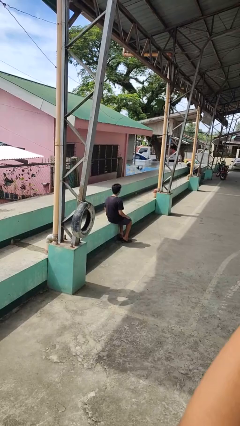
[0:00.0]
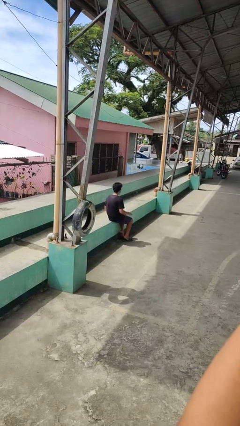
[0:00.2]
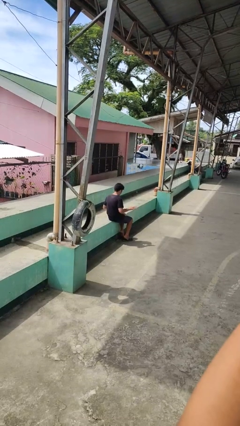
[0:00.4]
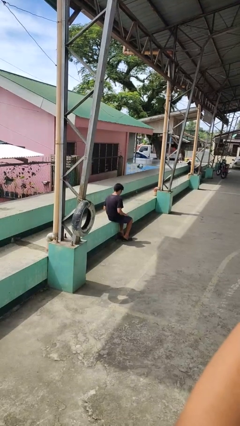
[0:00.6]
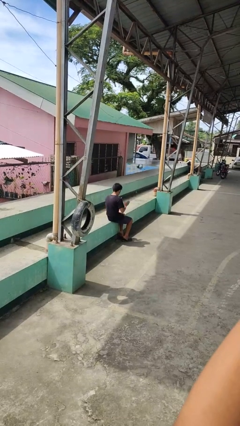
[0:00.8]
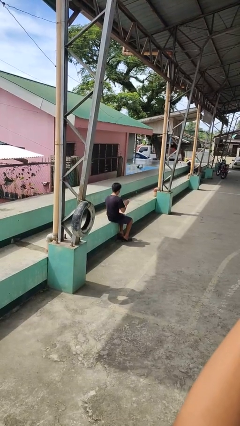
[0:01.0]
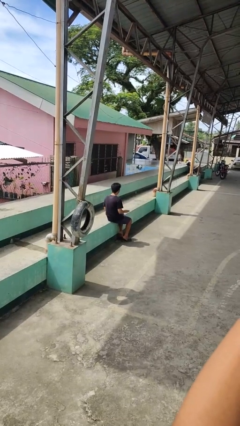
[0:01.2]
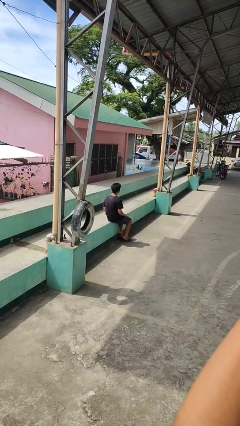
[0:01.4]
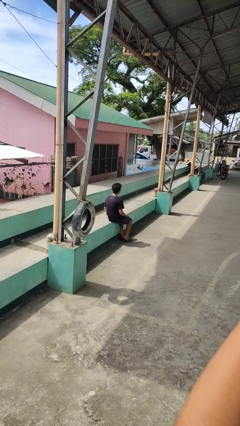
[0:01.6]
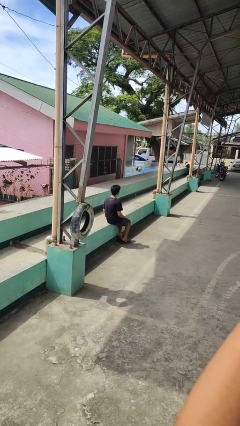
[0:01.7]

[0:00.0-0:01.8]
person slaps hands on thighs

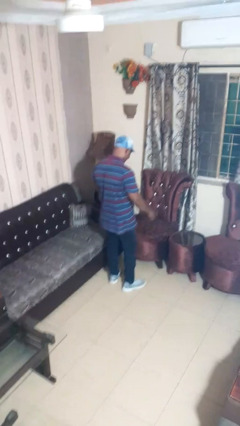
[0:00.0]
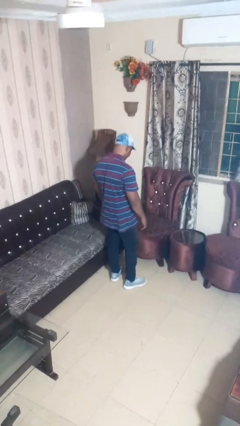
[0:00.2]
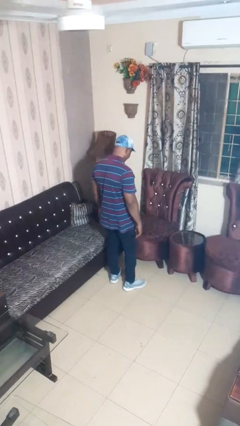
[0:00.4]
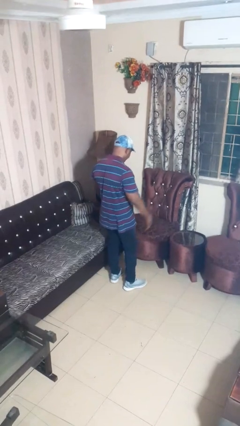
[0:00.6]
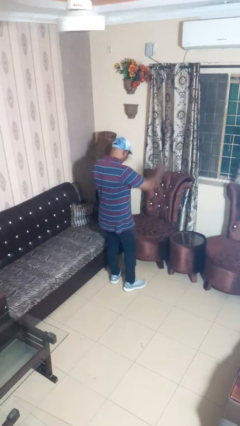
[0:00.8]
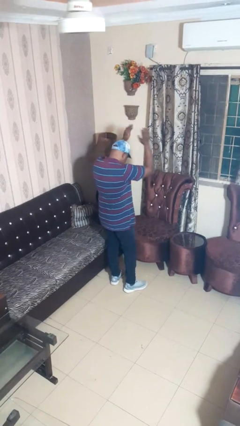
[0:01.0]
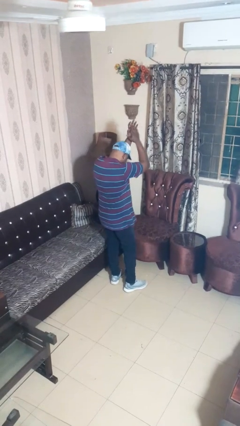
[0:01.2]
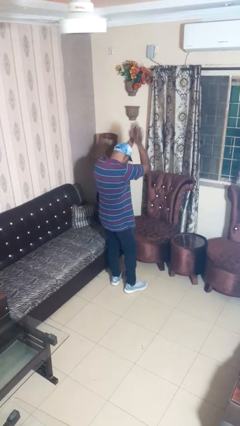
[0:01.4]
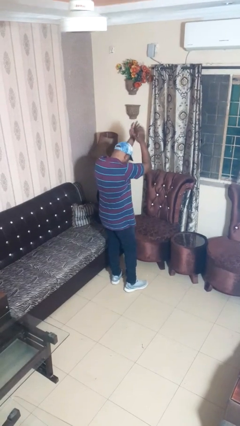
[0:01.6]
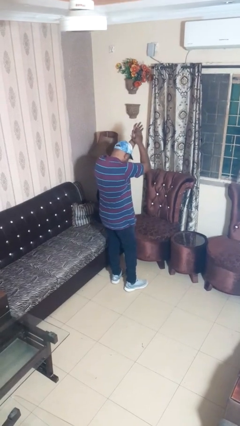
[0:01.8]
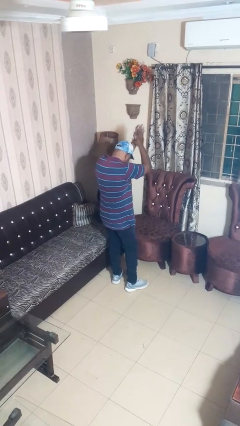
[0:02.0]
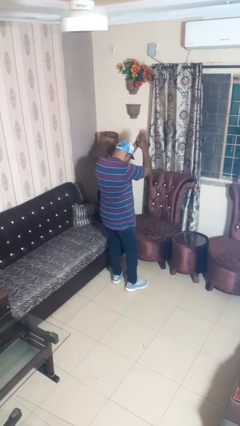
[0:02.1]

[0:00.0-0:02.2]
person claps hands

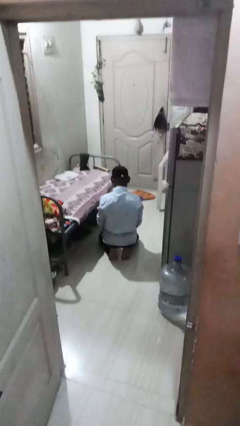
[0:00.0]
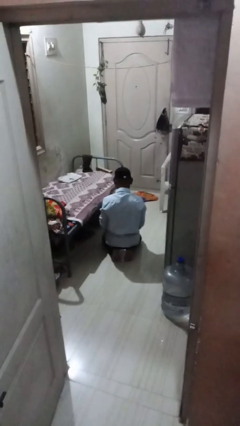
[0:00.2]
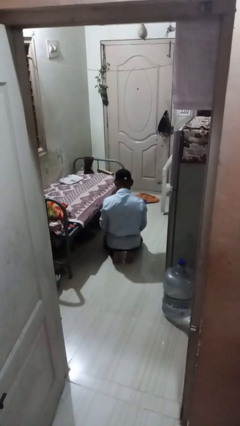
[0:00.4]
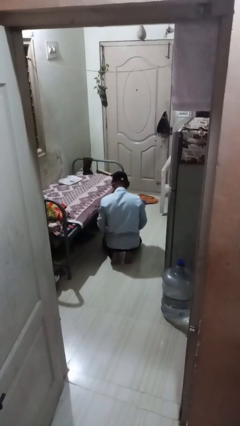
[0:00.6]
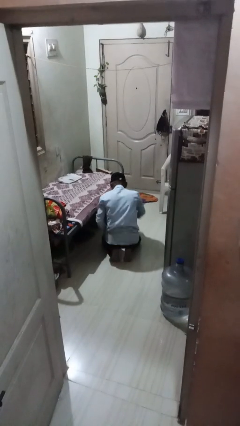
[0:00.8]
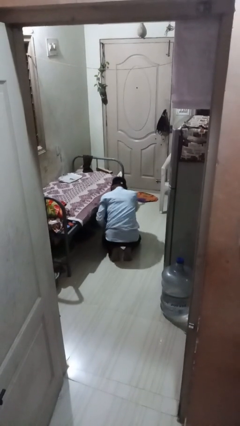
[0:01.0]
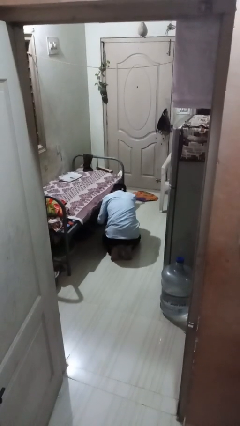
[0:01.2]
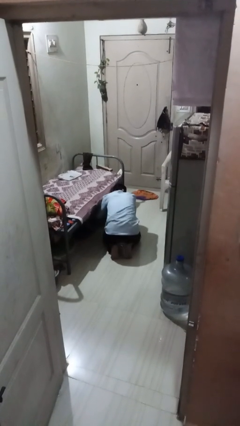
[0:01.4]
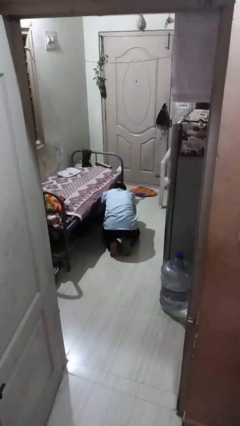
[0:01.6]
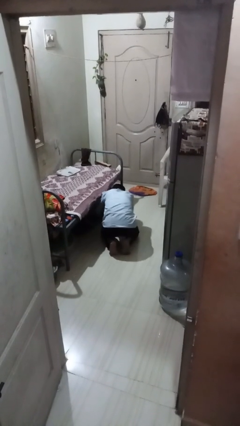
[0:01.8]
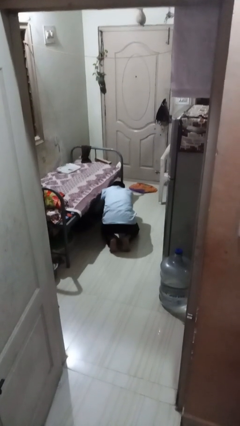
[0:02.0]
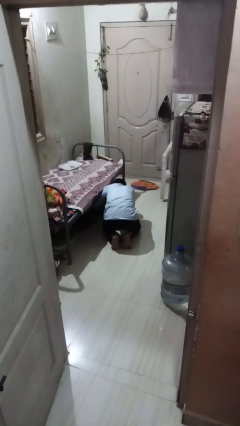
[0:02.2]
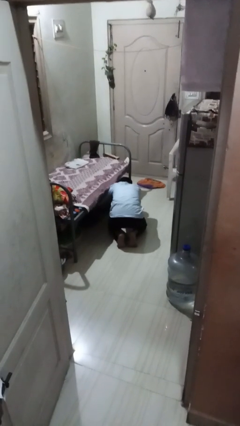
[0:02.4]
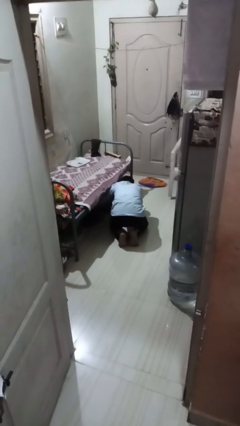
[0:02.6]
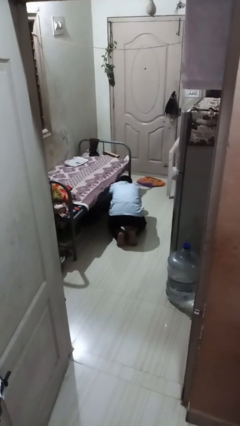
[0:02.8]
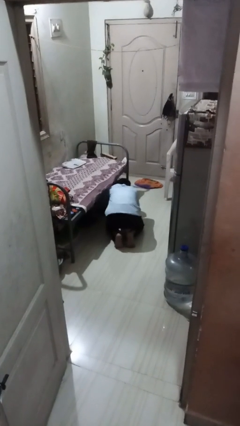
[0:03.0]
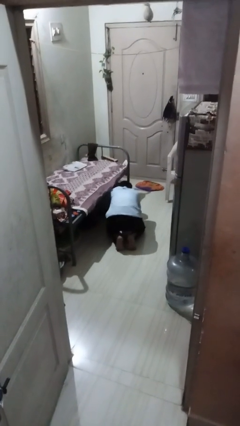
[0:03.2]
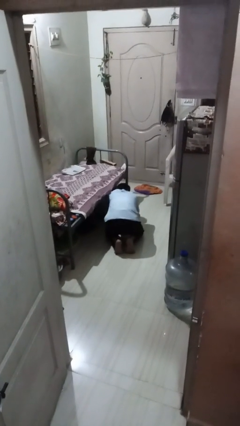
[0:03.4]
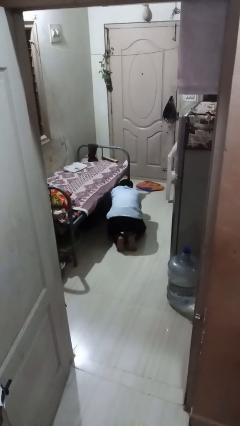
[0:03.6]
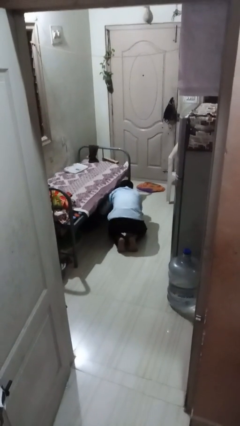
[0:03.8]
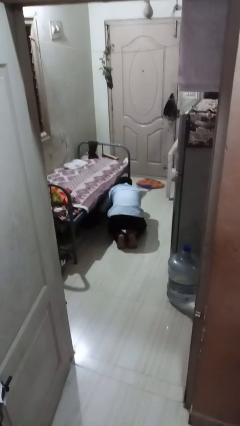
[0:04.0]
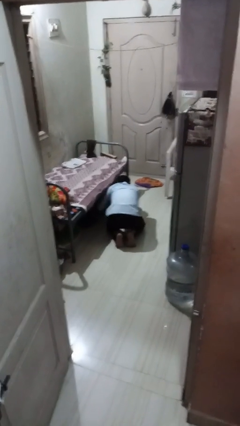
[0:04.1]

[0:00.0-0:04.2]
person searches under bed

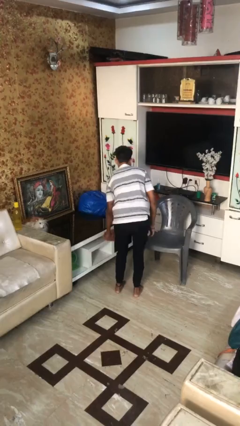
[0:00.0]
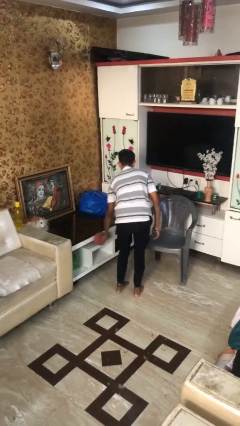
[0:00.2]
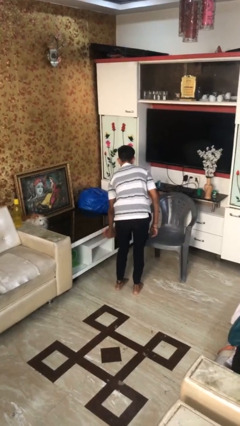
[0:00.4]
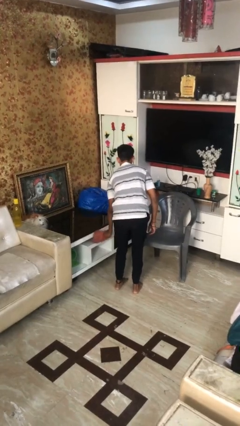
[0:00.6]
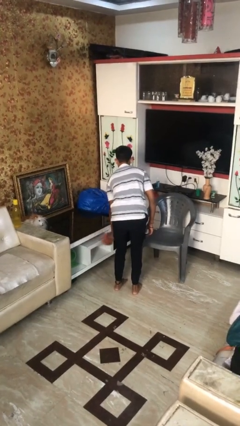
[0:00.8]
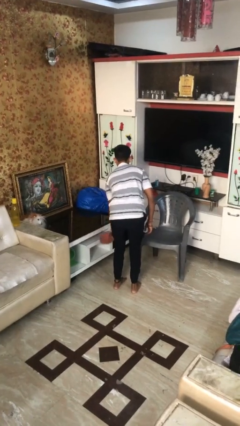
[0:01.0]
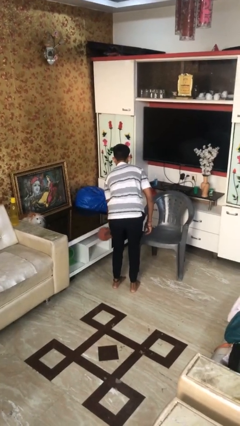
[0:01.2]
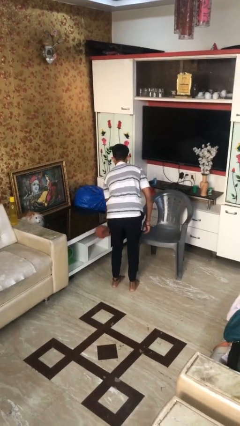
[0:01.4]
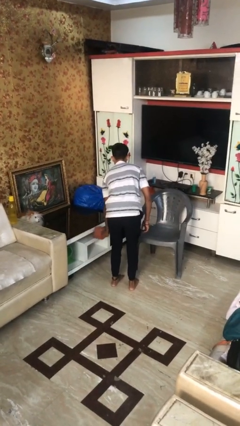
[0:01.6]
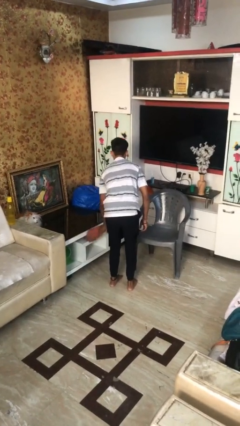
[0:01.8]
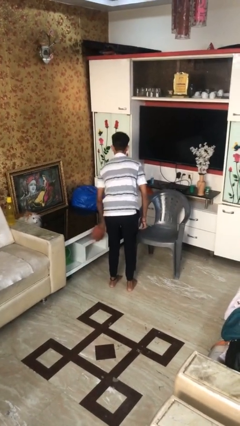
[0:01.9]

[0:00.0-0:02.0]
person dusts furniture

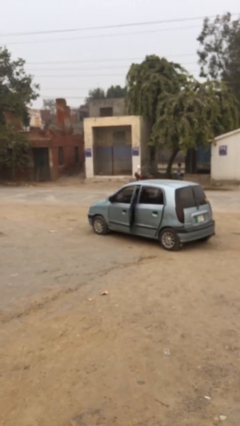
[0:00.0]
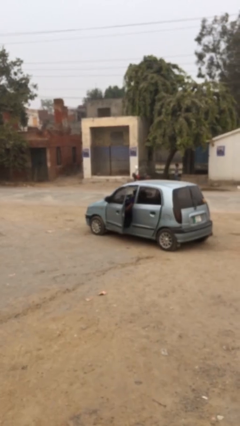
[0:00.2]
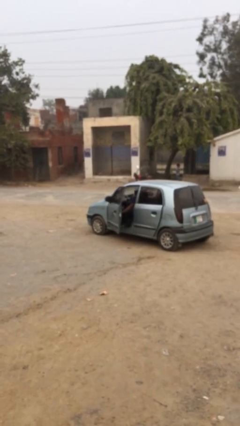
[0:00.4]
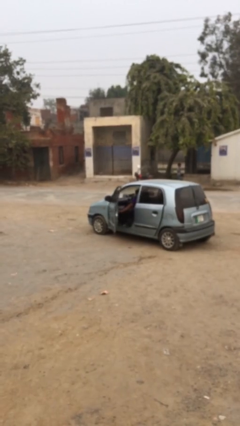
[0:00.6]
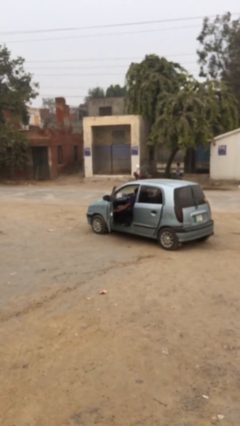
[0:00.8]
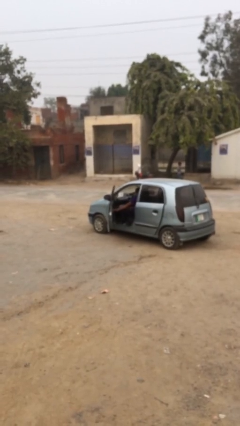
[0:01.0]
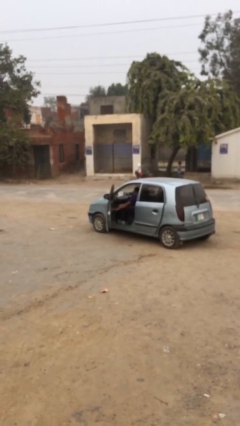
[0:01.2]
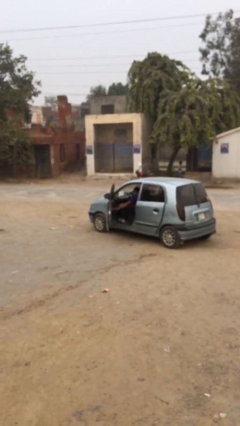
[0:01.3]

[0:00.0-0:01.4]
person opens car door

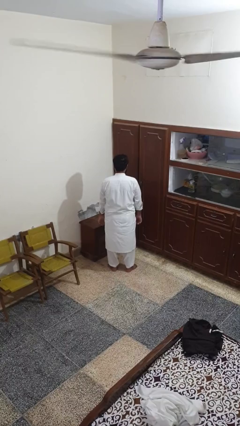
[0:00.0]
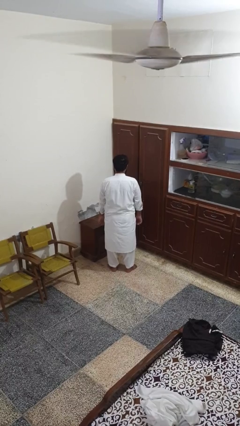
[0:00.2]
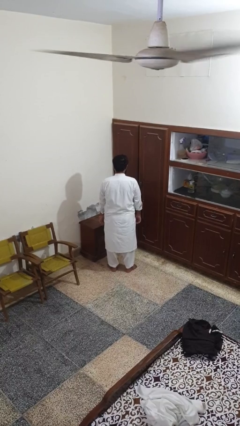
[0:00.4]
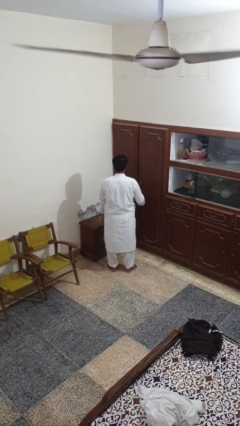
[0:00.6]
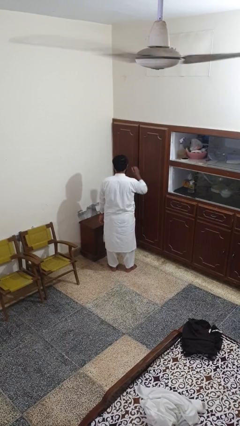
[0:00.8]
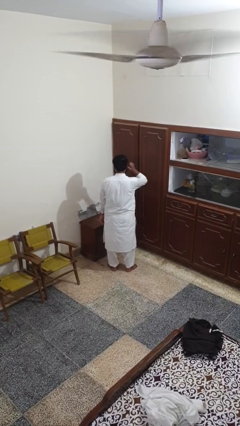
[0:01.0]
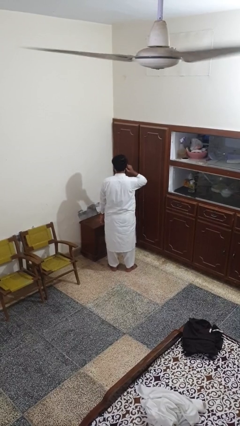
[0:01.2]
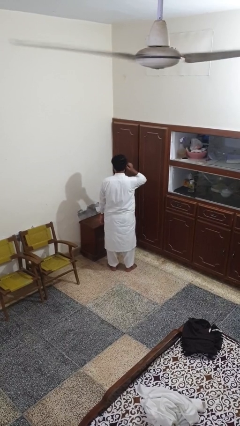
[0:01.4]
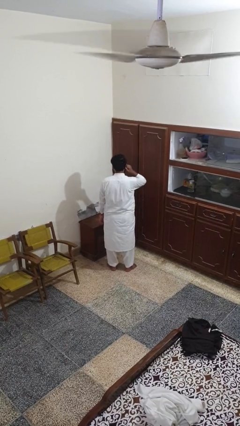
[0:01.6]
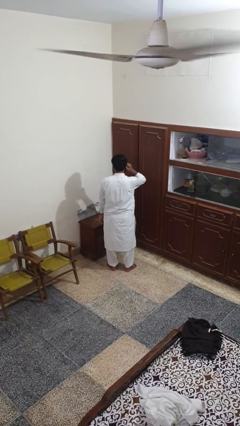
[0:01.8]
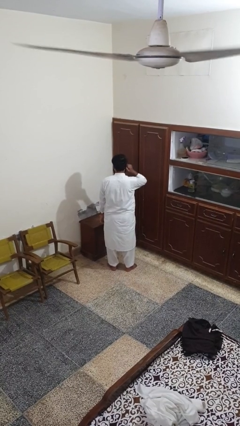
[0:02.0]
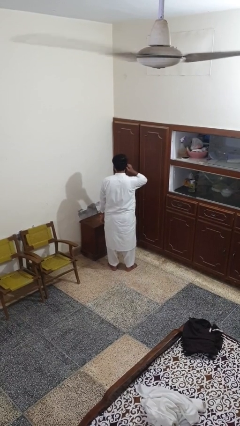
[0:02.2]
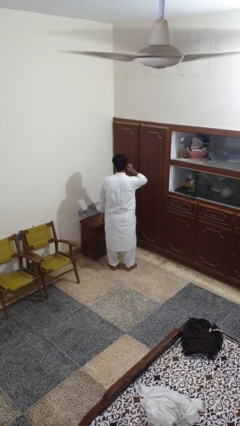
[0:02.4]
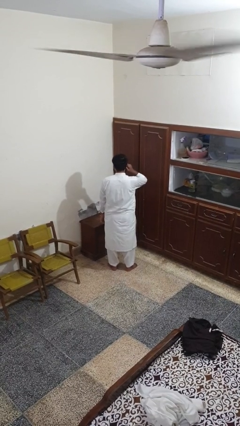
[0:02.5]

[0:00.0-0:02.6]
person touches earlobe

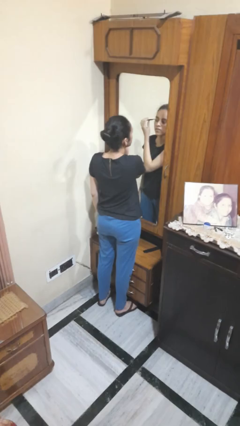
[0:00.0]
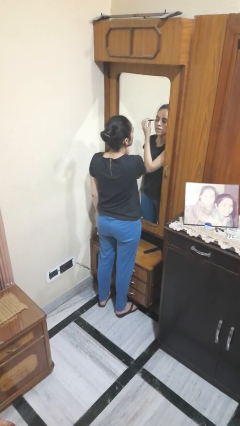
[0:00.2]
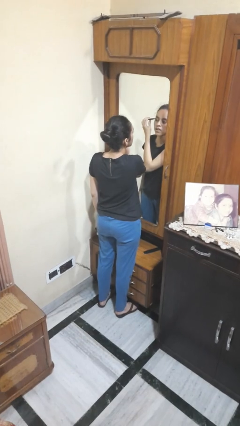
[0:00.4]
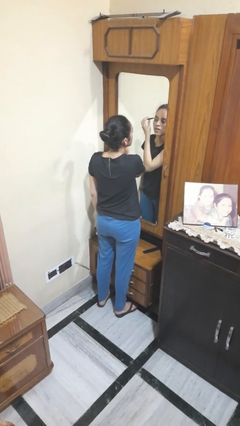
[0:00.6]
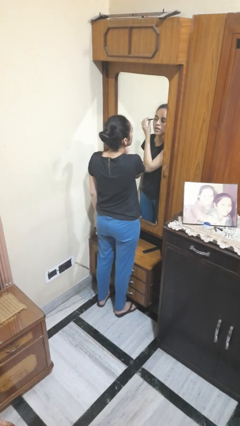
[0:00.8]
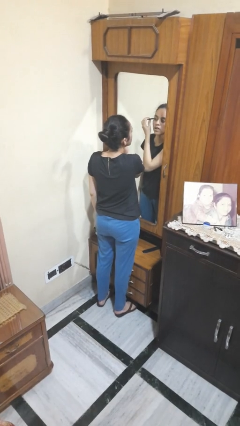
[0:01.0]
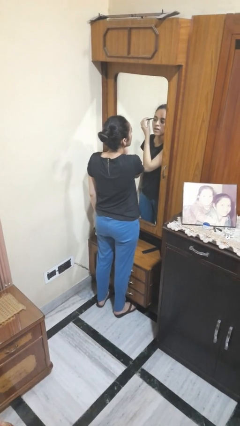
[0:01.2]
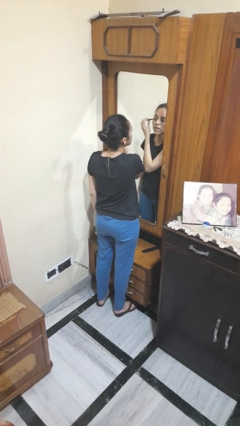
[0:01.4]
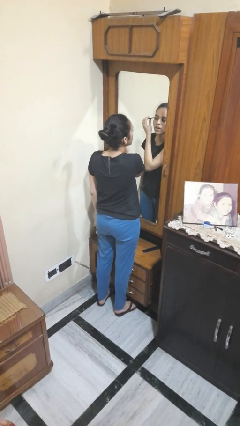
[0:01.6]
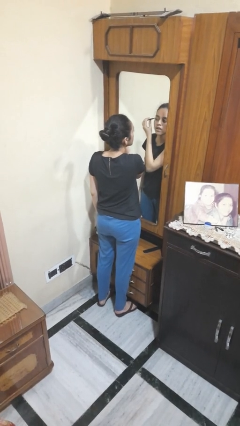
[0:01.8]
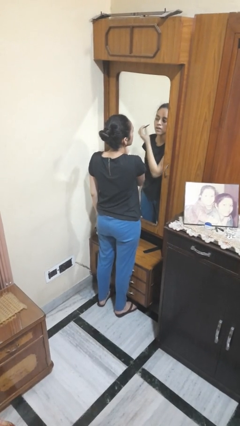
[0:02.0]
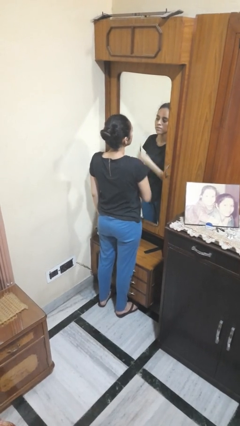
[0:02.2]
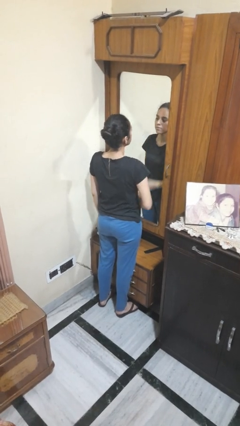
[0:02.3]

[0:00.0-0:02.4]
person applies eye makeup

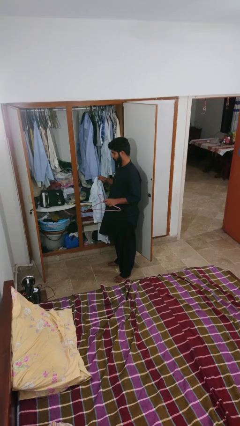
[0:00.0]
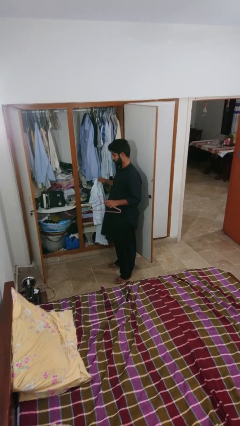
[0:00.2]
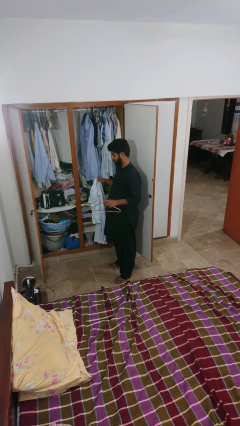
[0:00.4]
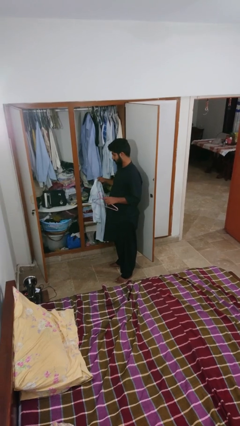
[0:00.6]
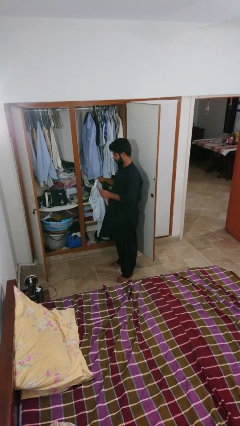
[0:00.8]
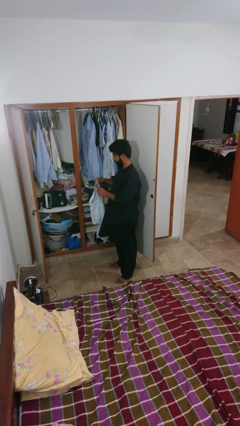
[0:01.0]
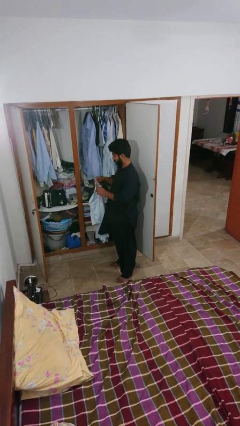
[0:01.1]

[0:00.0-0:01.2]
person puts clothes into closet
